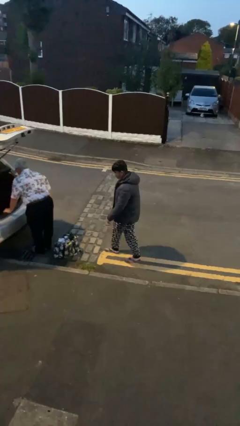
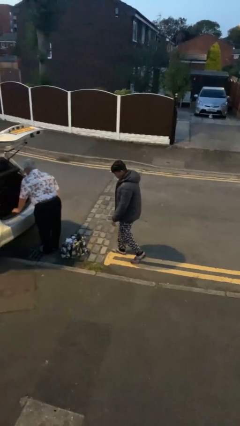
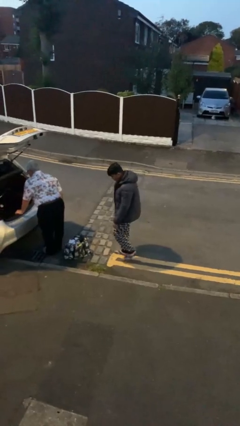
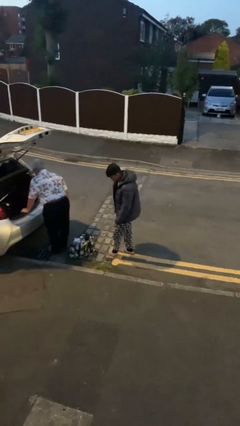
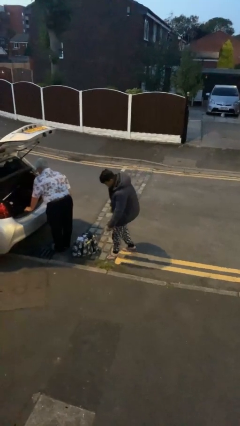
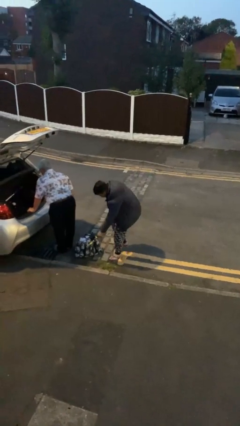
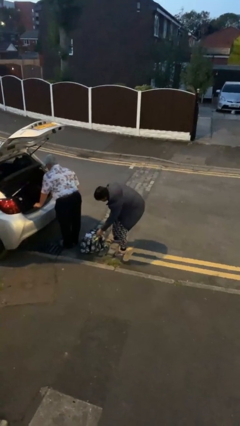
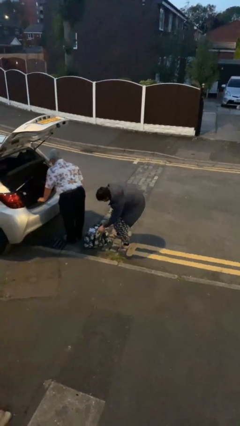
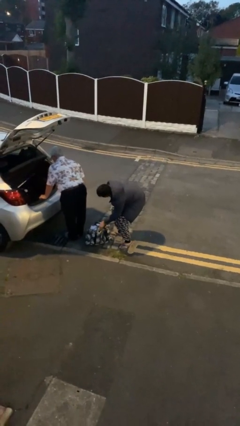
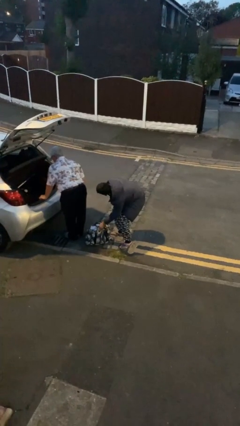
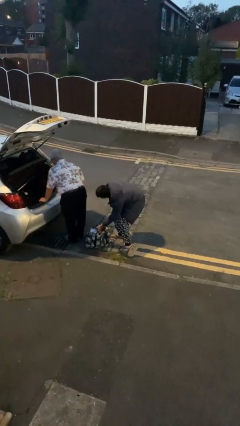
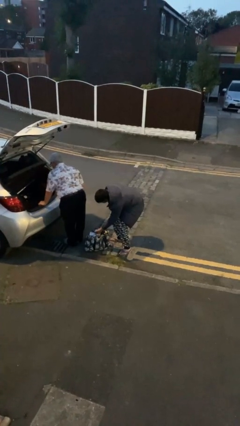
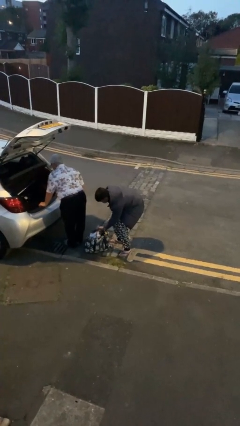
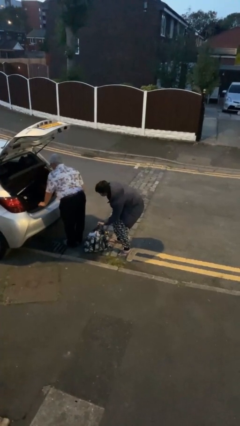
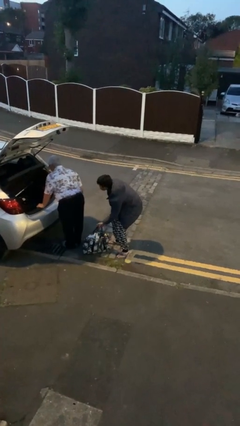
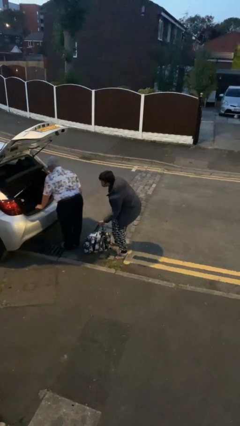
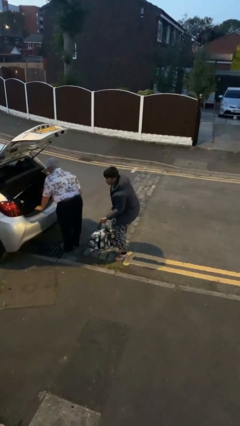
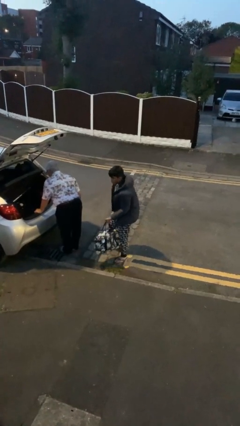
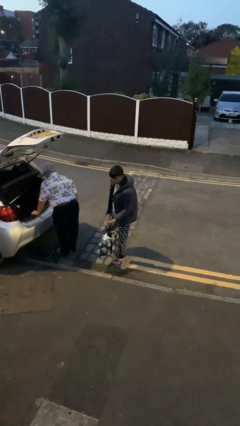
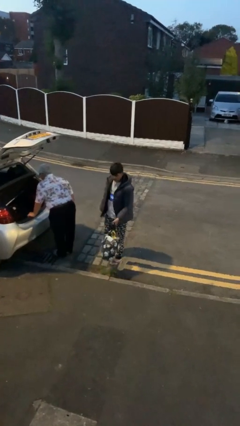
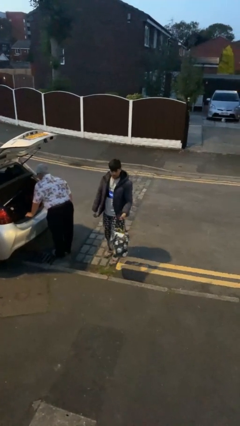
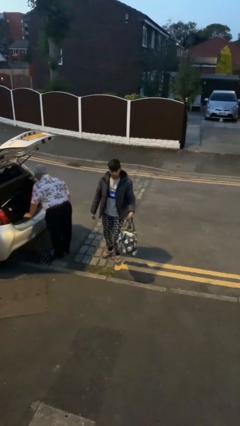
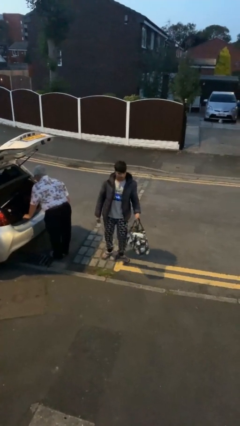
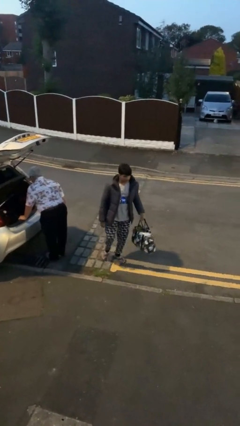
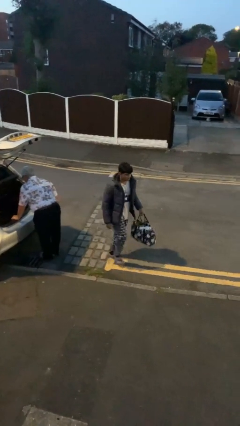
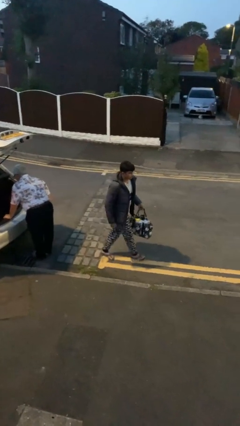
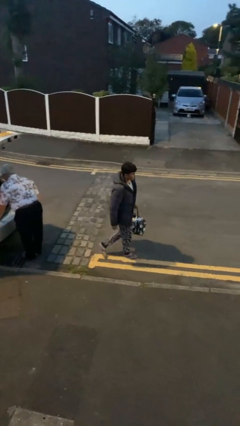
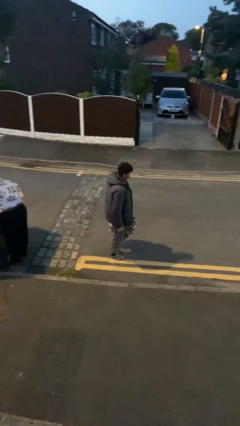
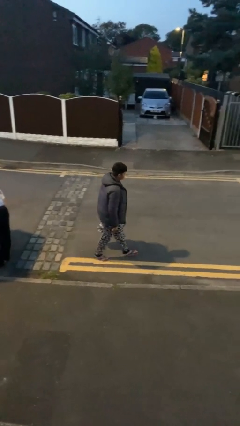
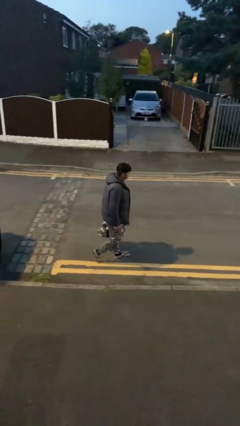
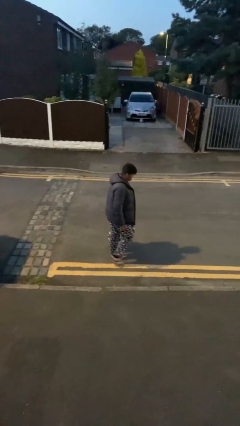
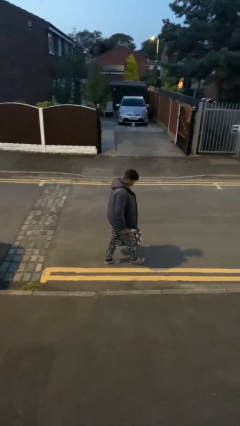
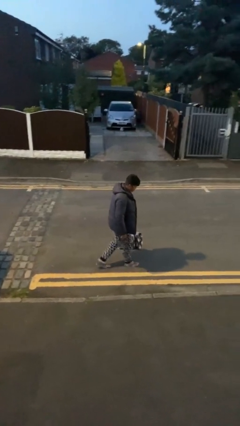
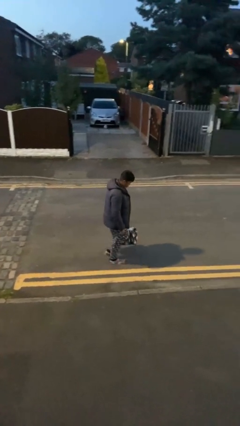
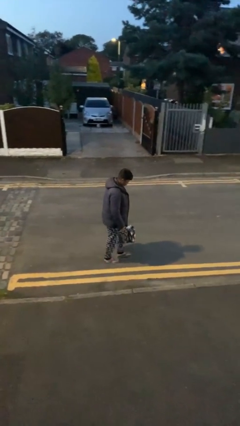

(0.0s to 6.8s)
person steals object from person

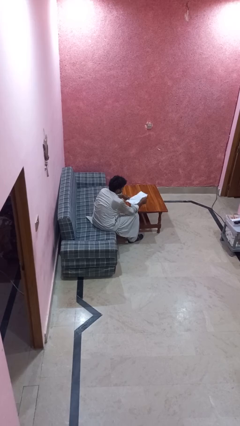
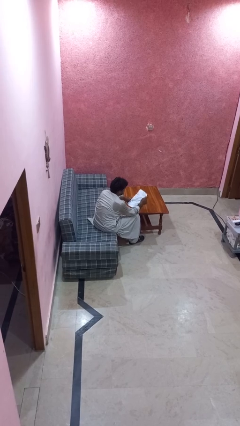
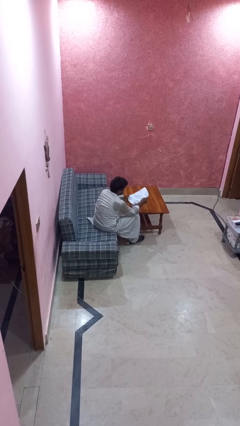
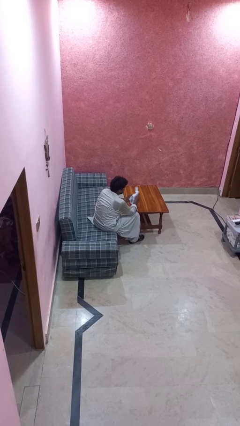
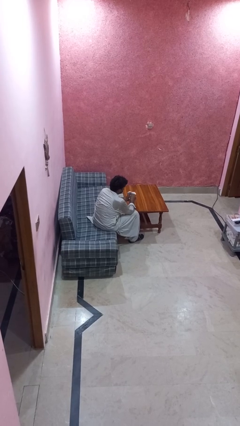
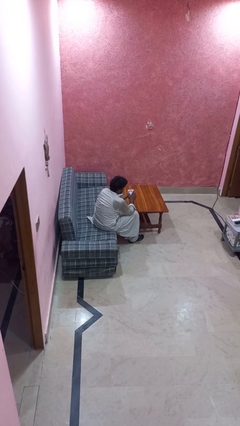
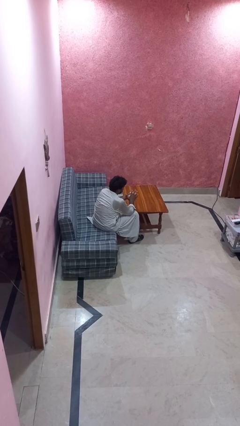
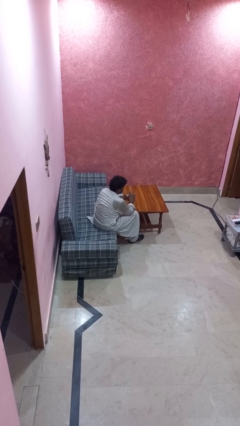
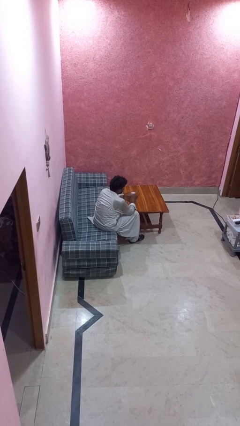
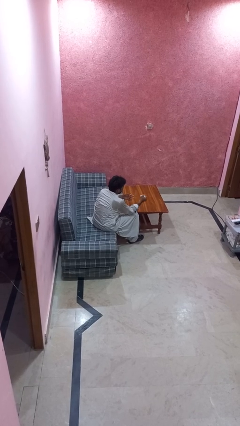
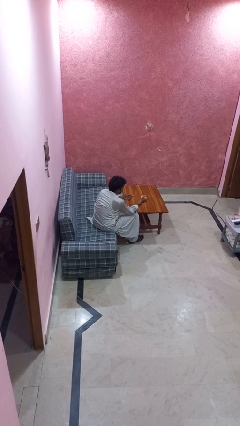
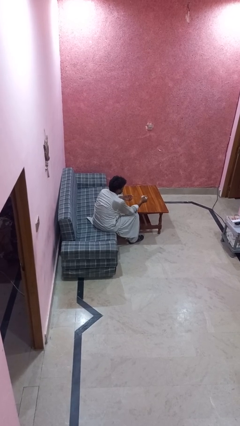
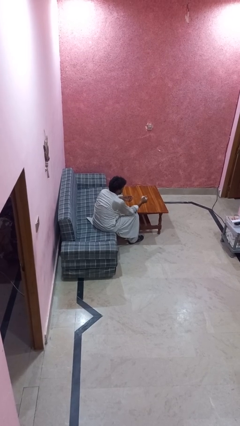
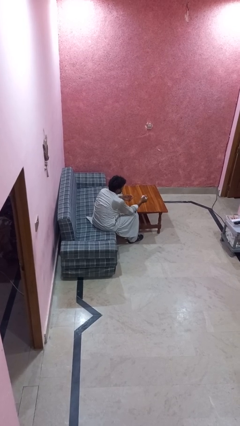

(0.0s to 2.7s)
person crumples paper

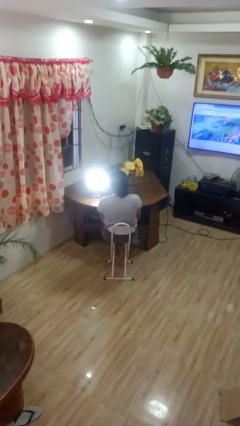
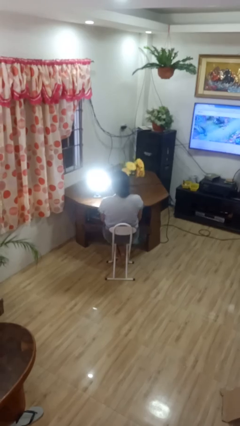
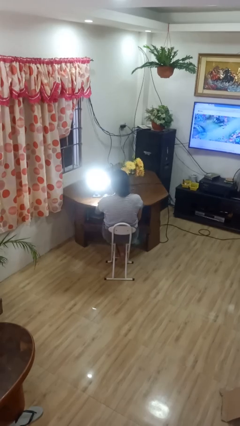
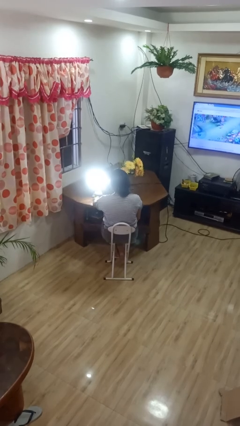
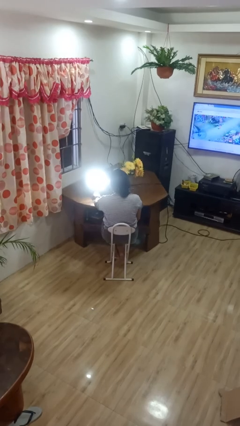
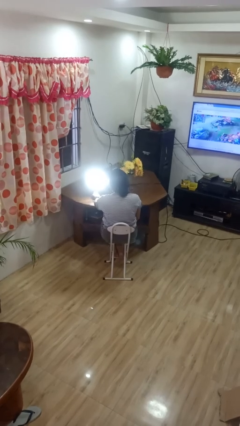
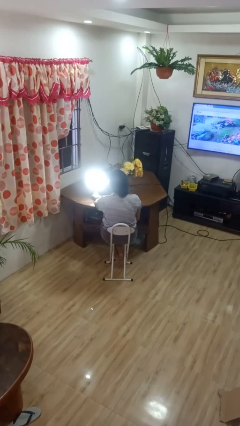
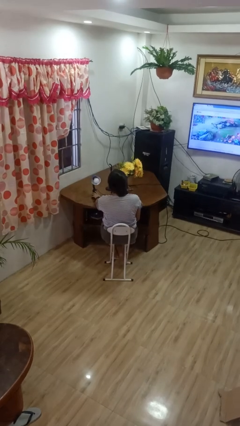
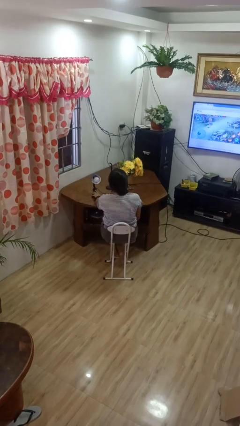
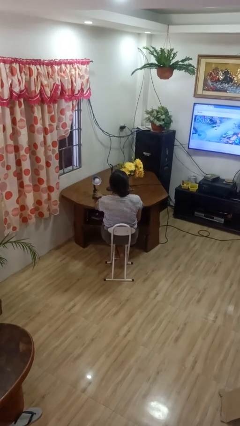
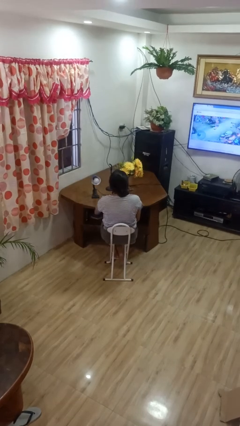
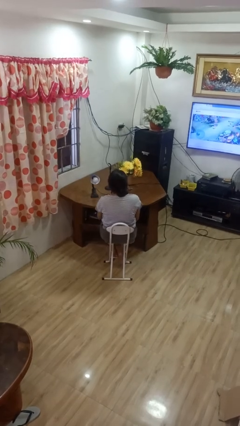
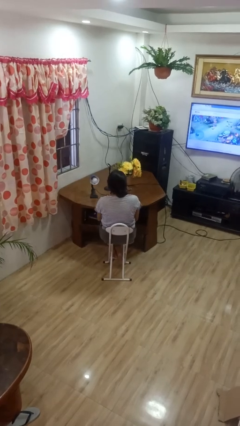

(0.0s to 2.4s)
person turns off lamp

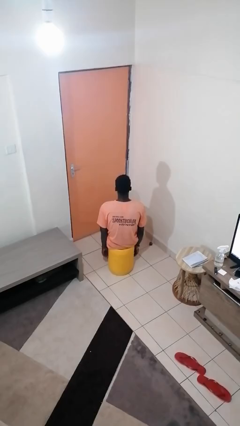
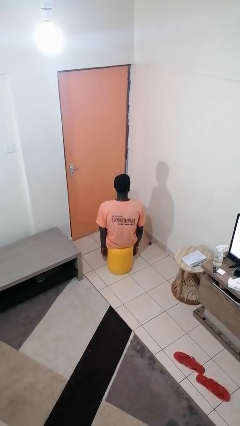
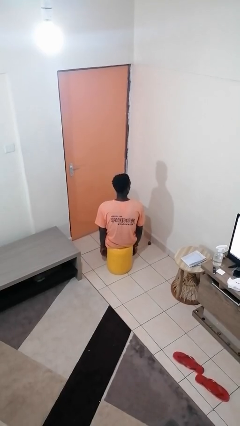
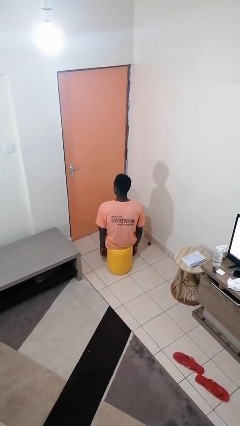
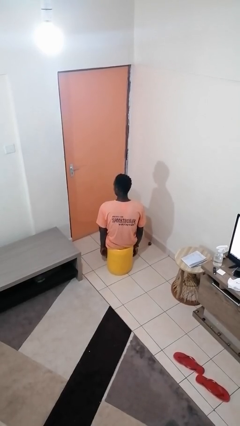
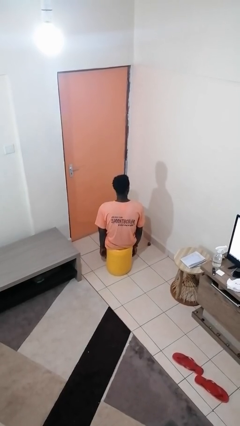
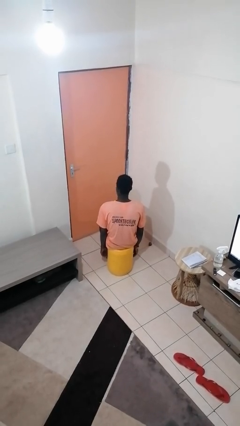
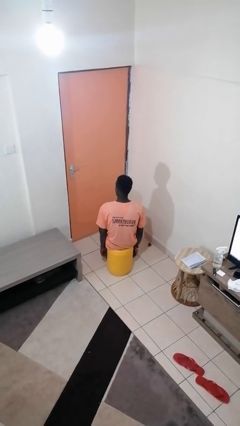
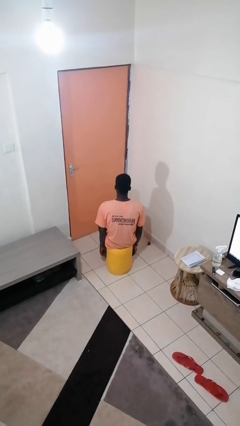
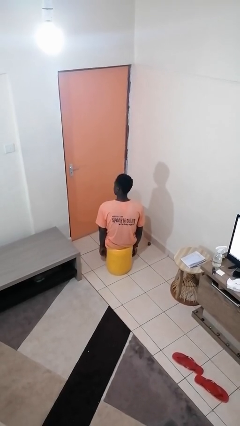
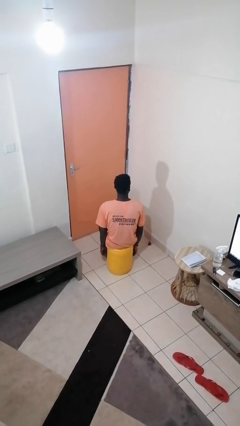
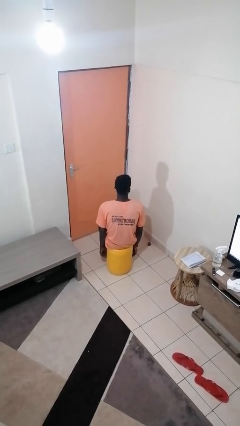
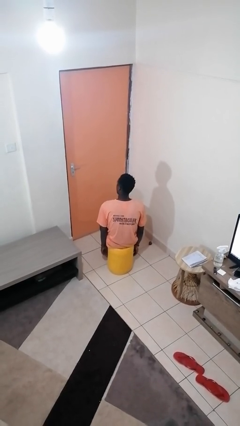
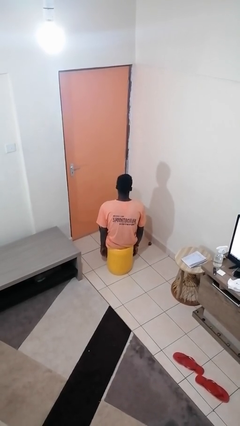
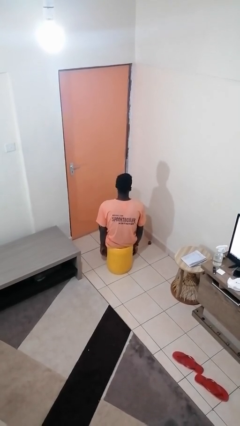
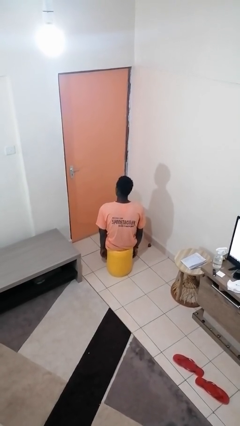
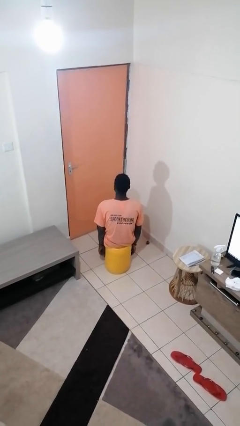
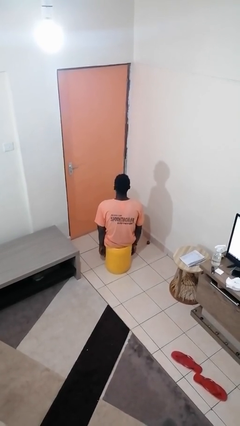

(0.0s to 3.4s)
person shakes head

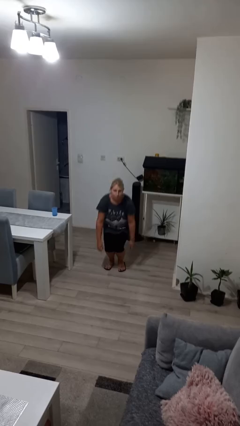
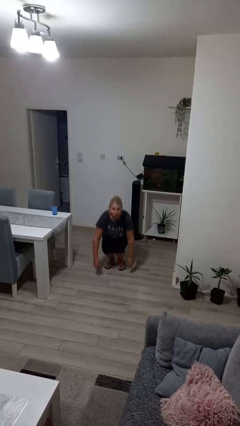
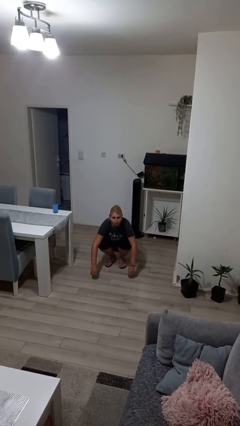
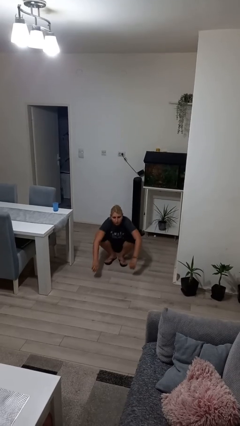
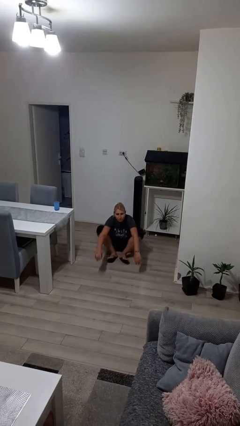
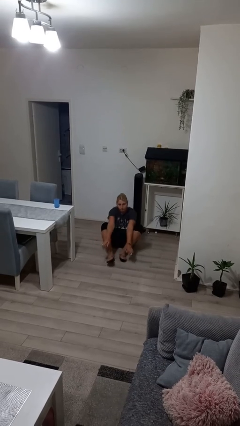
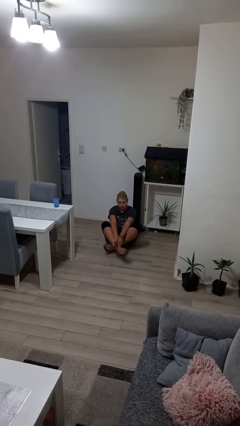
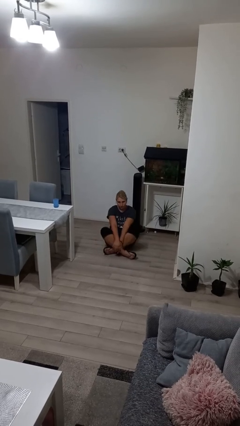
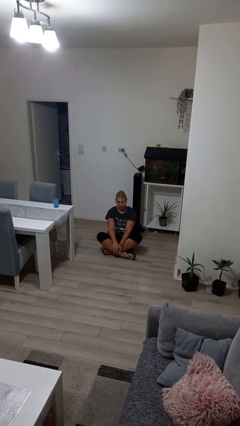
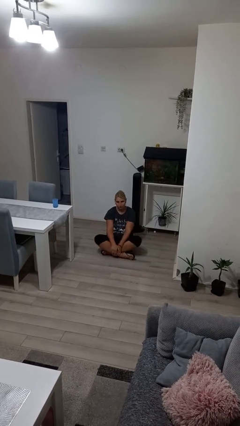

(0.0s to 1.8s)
person sits crisscross

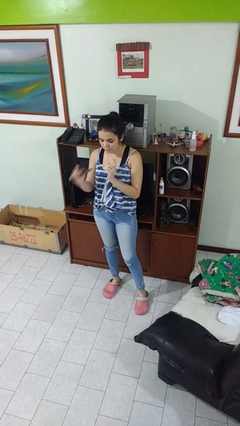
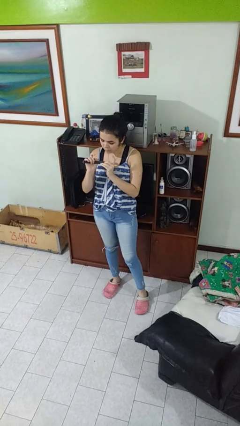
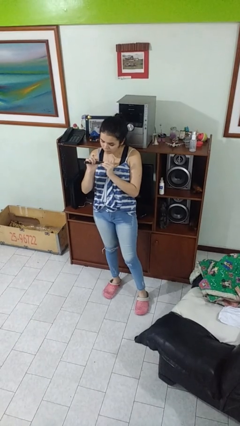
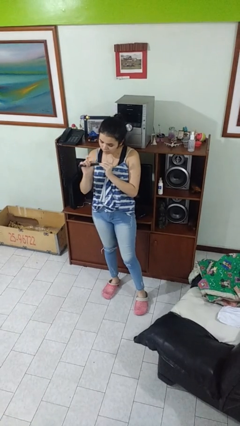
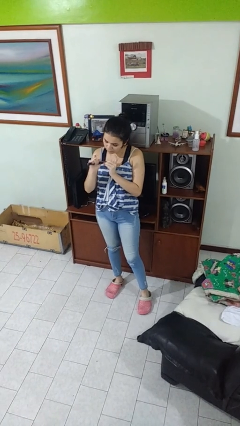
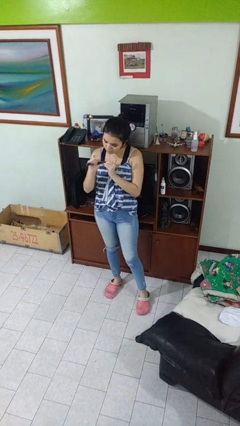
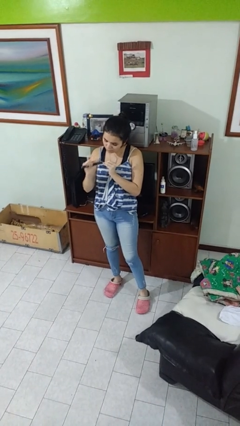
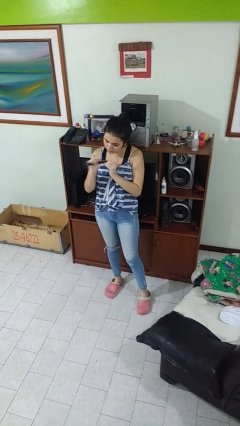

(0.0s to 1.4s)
person files fingernails
